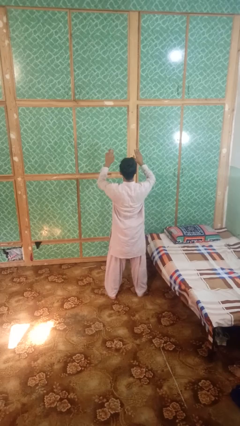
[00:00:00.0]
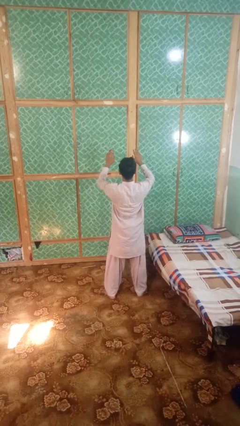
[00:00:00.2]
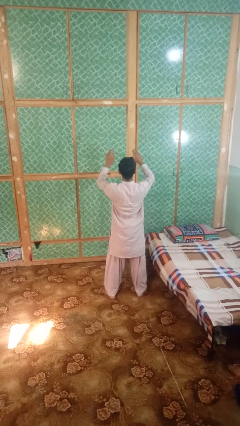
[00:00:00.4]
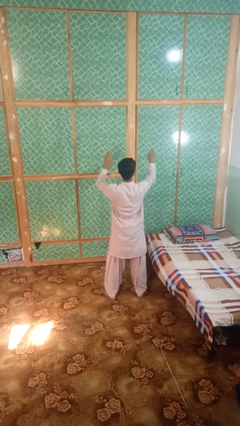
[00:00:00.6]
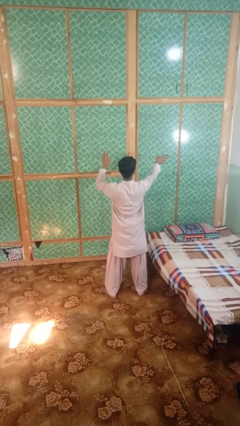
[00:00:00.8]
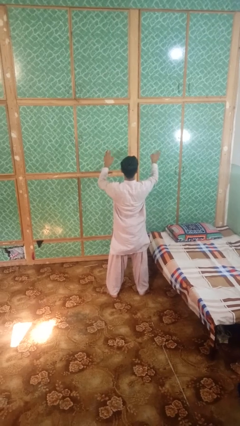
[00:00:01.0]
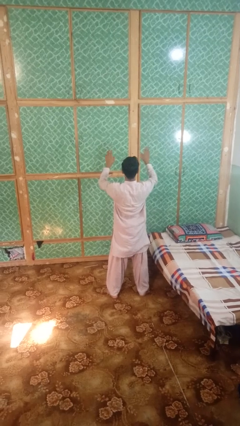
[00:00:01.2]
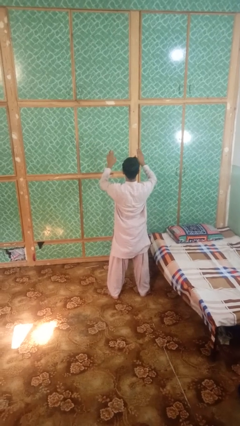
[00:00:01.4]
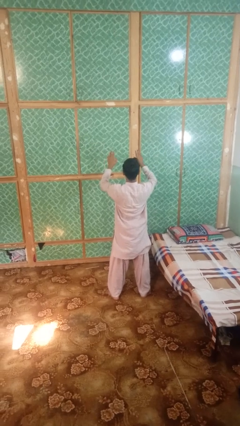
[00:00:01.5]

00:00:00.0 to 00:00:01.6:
person gestures swipe right

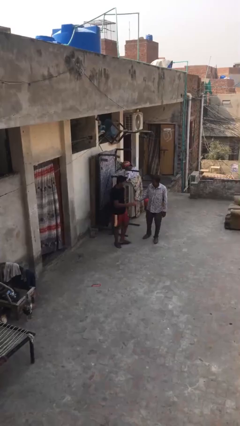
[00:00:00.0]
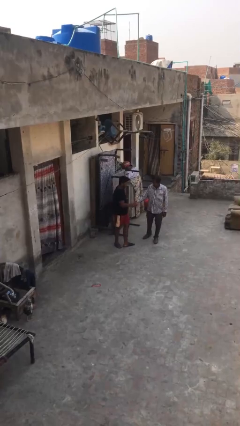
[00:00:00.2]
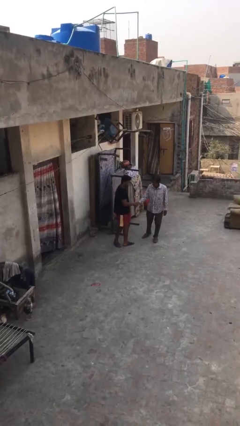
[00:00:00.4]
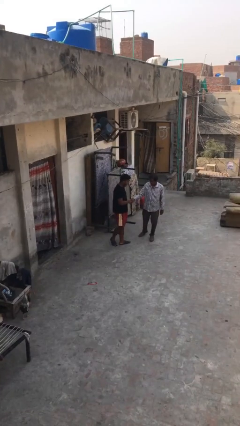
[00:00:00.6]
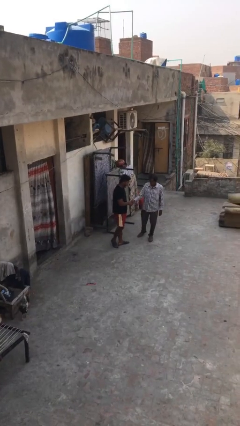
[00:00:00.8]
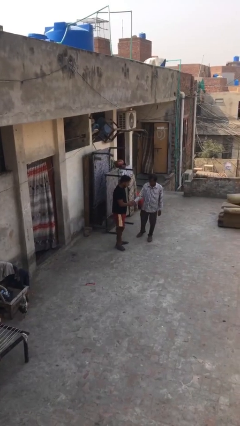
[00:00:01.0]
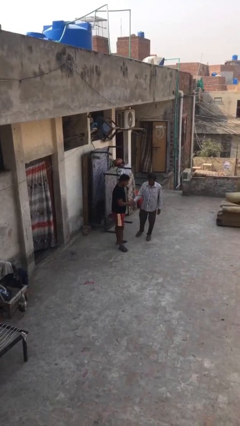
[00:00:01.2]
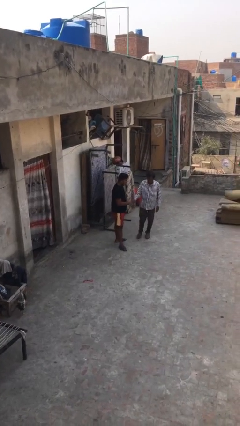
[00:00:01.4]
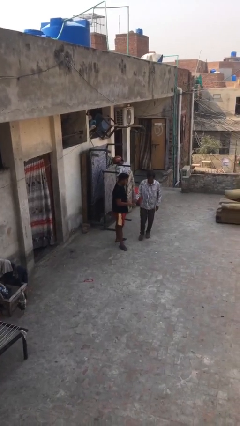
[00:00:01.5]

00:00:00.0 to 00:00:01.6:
person shakes hand

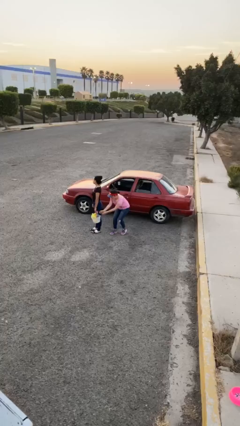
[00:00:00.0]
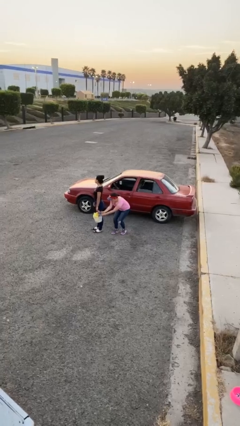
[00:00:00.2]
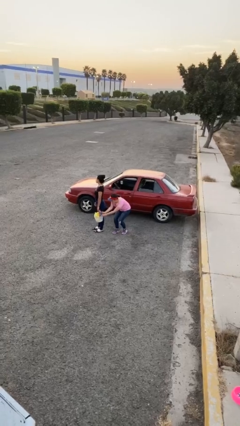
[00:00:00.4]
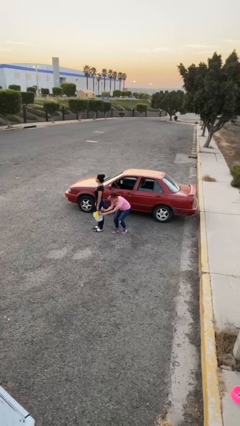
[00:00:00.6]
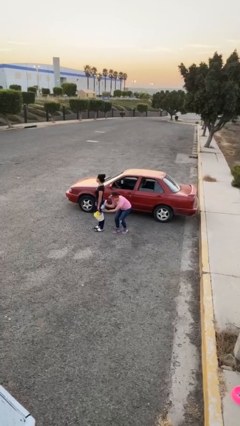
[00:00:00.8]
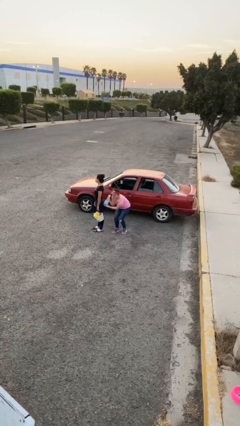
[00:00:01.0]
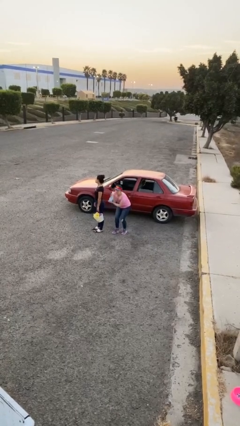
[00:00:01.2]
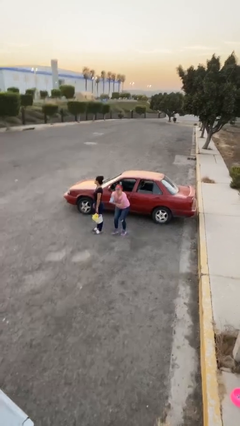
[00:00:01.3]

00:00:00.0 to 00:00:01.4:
person steals object from person

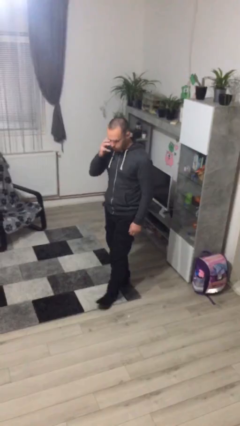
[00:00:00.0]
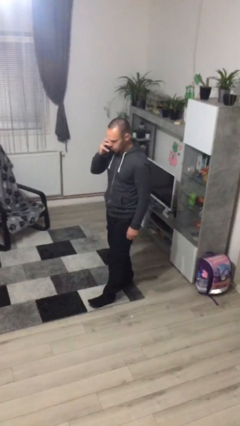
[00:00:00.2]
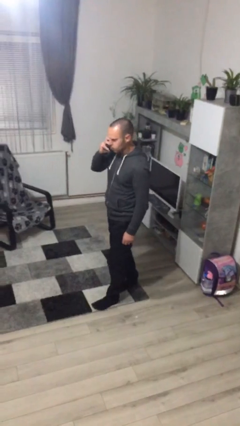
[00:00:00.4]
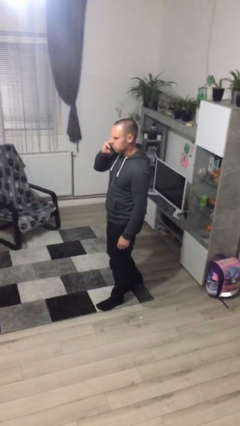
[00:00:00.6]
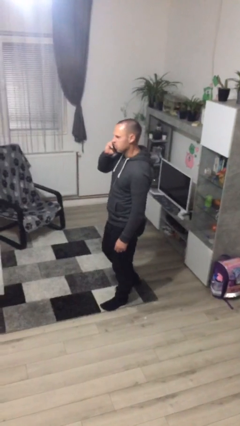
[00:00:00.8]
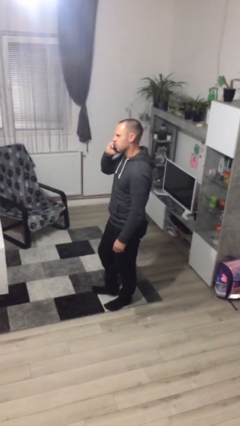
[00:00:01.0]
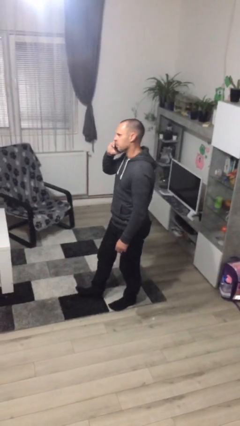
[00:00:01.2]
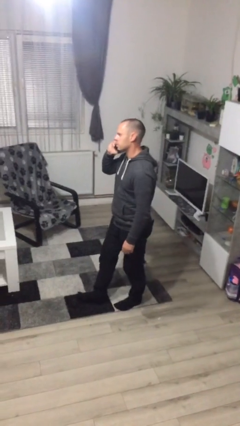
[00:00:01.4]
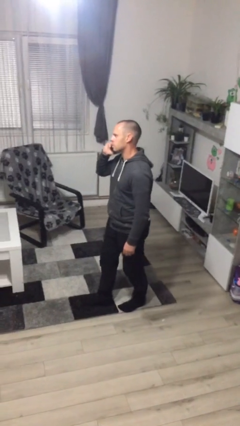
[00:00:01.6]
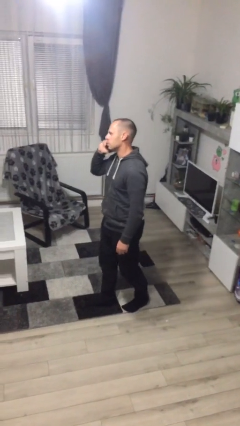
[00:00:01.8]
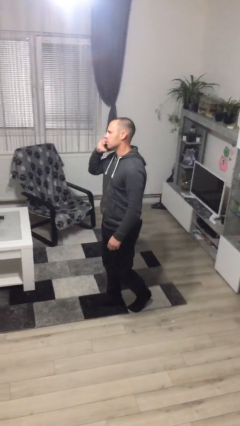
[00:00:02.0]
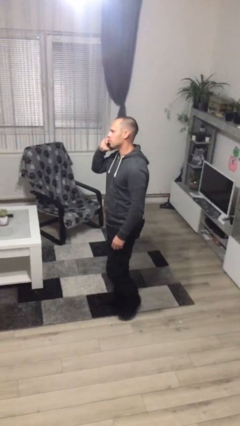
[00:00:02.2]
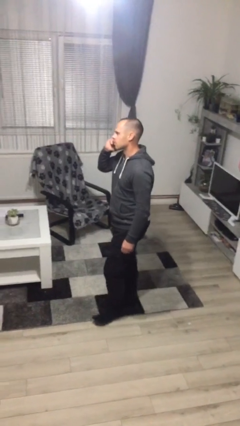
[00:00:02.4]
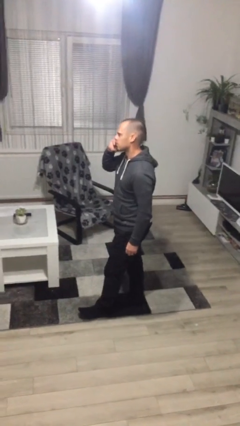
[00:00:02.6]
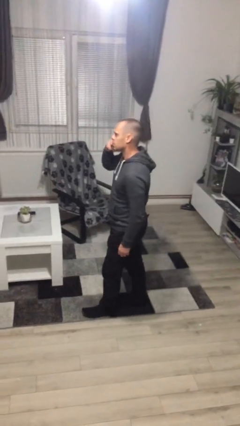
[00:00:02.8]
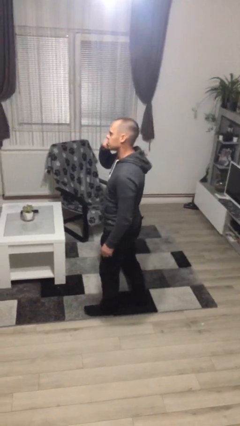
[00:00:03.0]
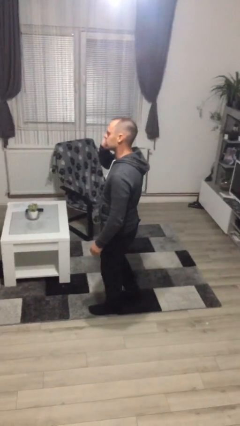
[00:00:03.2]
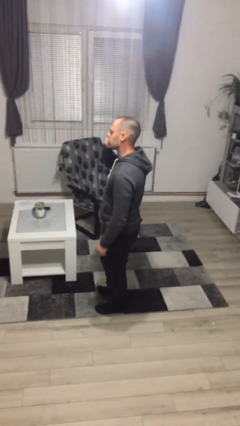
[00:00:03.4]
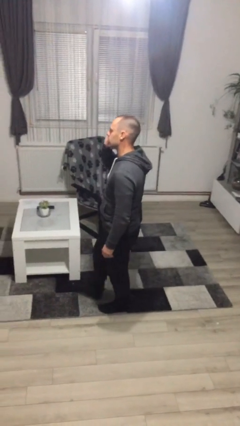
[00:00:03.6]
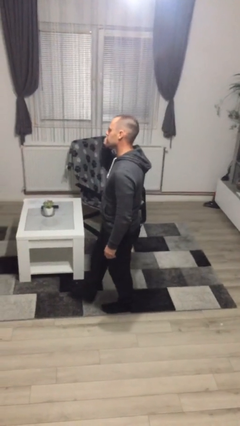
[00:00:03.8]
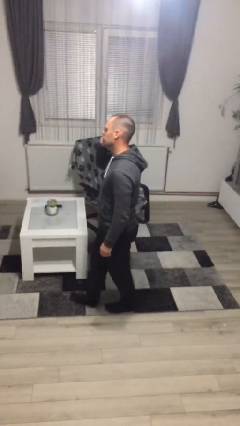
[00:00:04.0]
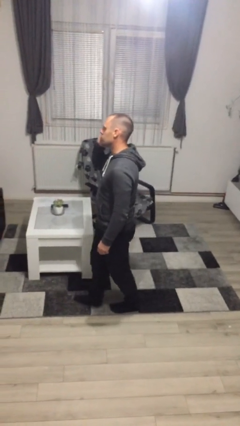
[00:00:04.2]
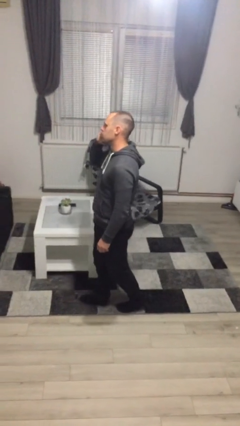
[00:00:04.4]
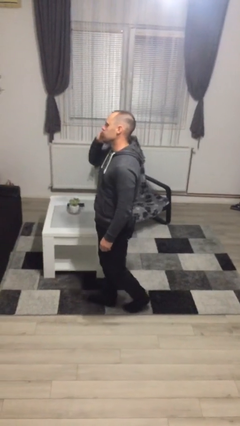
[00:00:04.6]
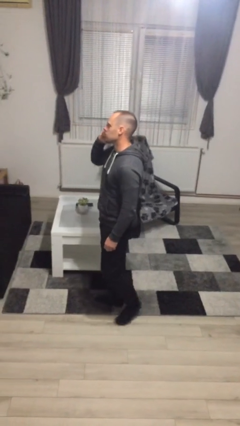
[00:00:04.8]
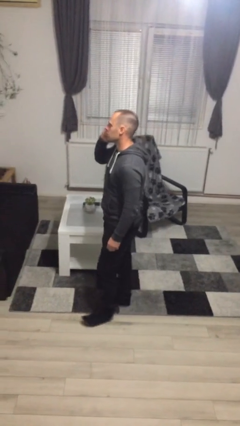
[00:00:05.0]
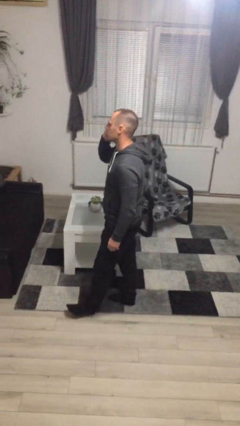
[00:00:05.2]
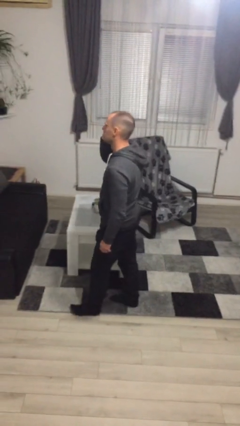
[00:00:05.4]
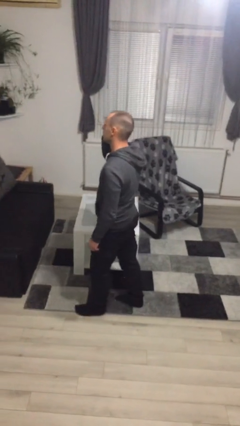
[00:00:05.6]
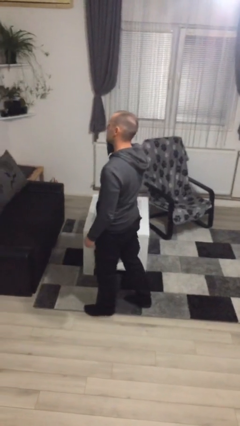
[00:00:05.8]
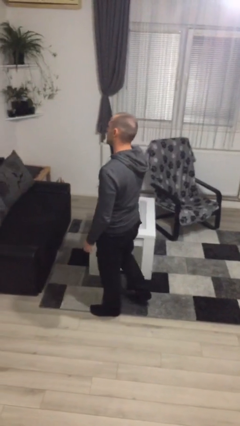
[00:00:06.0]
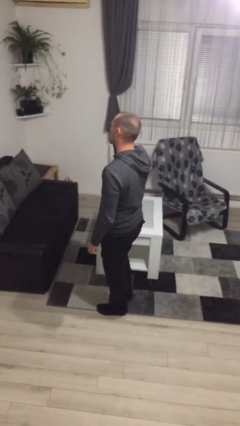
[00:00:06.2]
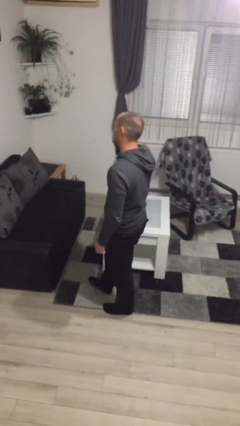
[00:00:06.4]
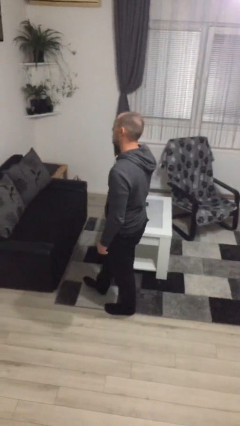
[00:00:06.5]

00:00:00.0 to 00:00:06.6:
person talks on phone

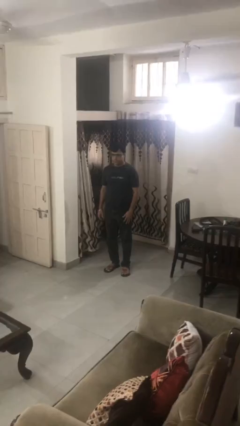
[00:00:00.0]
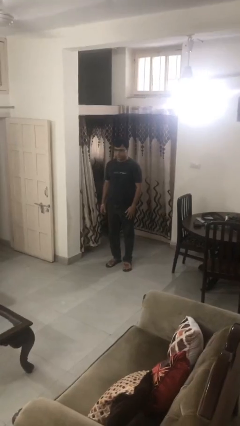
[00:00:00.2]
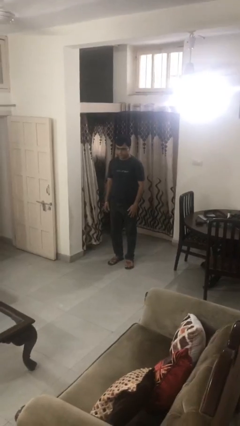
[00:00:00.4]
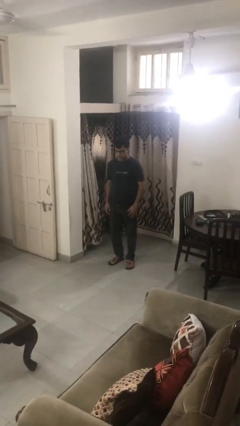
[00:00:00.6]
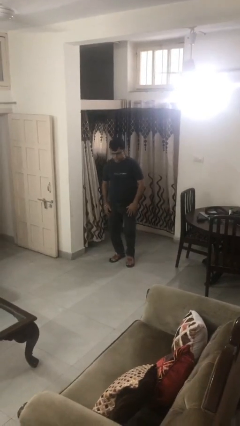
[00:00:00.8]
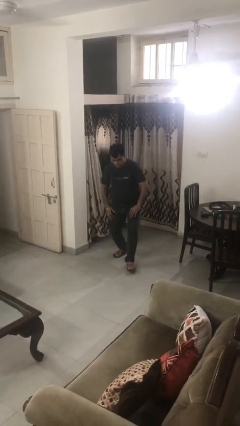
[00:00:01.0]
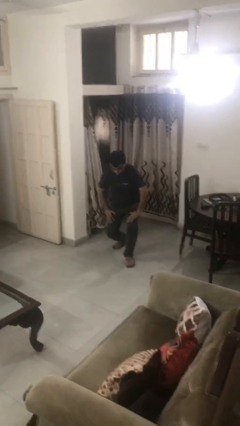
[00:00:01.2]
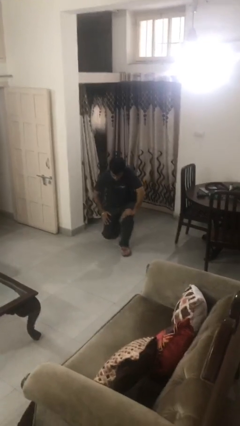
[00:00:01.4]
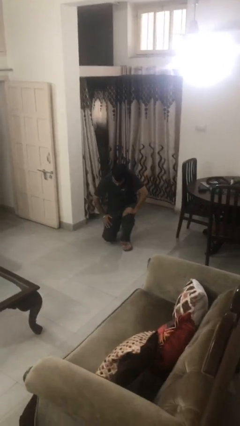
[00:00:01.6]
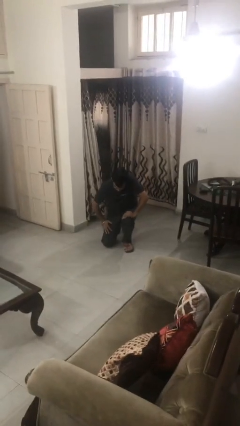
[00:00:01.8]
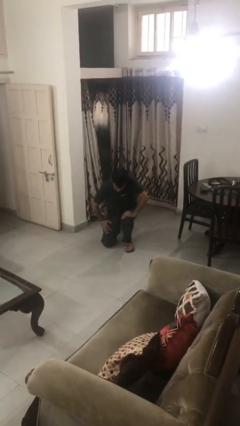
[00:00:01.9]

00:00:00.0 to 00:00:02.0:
person kneels

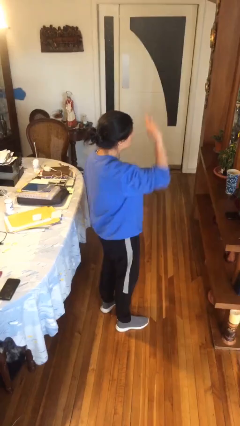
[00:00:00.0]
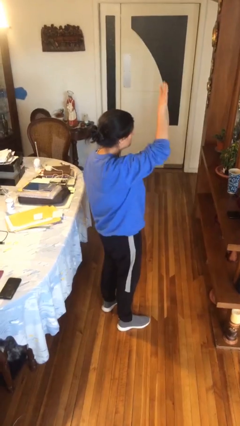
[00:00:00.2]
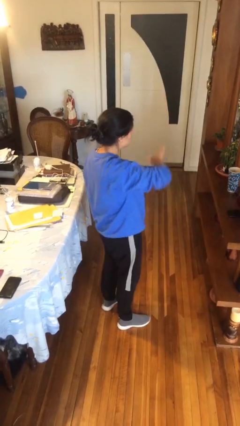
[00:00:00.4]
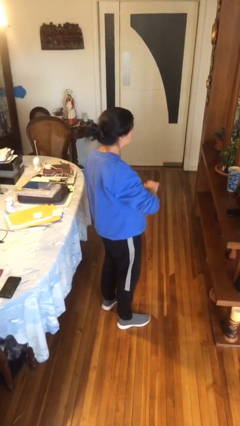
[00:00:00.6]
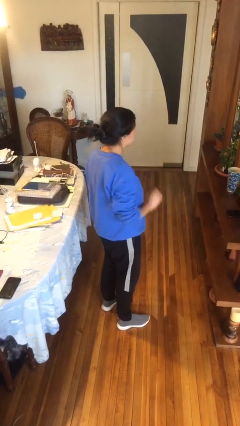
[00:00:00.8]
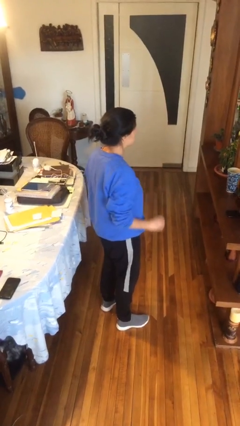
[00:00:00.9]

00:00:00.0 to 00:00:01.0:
person gestures swipe down

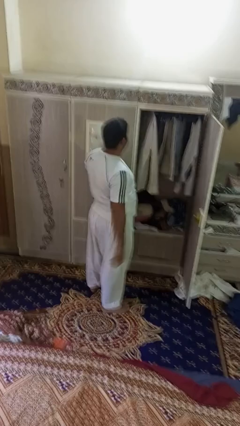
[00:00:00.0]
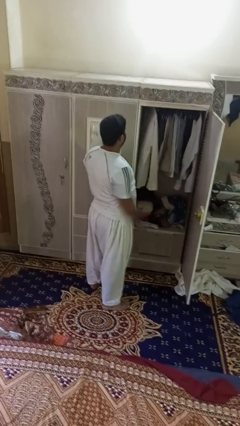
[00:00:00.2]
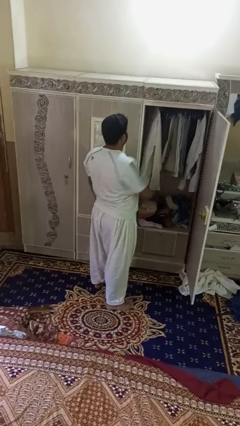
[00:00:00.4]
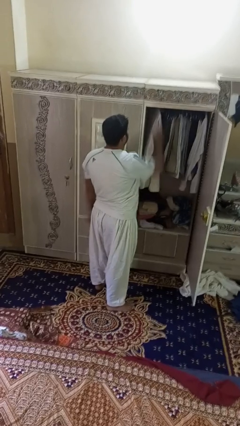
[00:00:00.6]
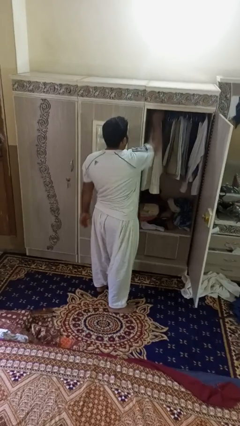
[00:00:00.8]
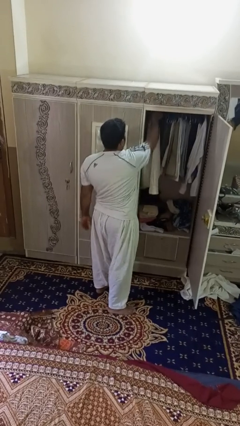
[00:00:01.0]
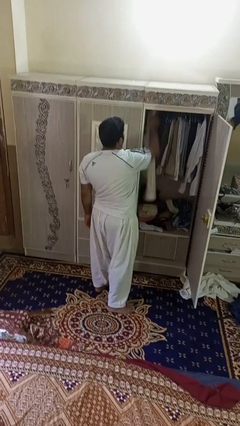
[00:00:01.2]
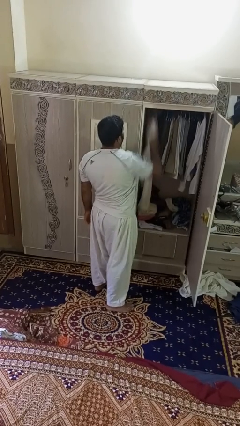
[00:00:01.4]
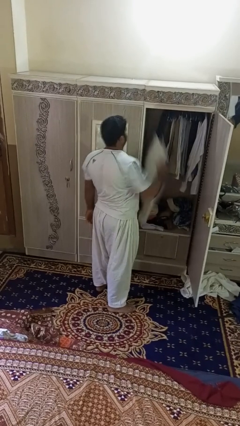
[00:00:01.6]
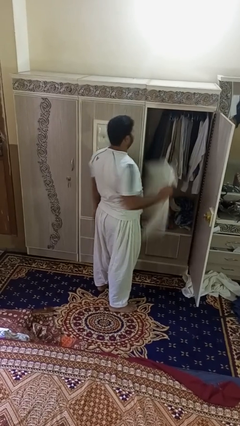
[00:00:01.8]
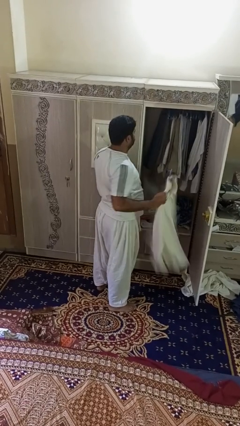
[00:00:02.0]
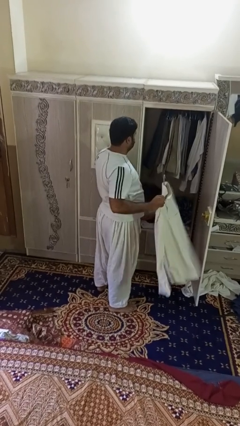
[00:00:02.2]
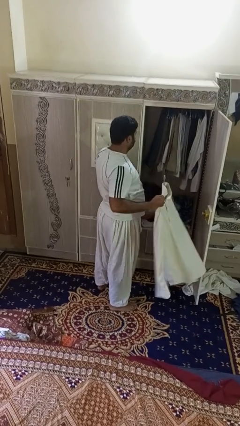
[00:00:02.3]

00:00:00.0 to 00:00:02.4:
person takes clothes from closet

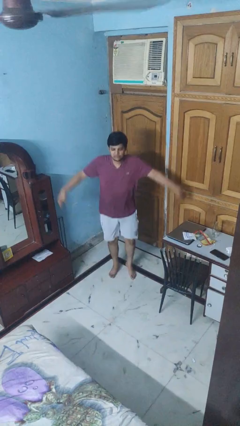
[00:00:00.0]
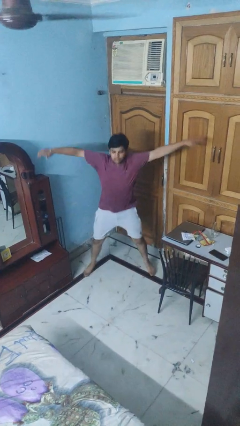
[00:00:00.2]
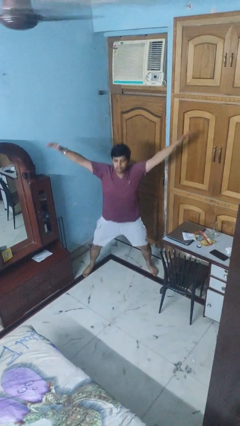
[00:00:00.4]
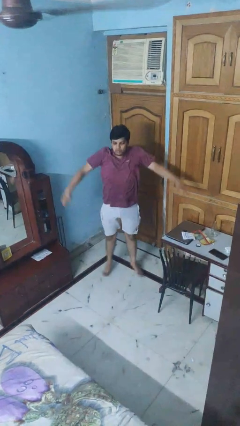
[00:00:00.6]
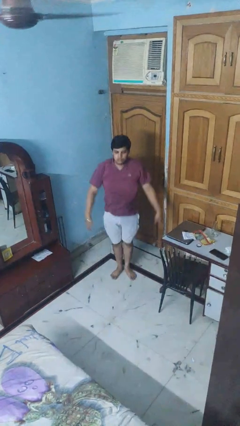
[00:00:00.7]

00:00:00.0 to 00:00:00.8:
person exercises with jumping jacks
